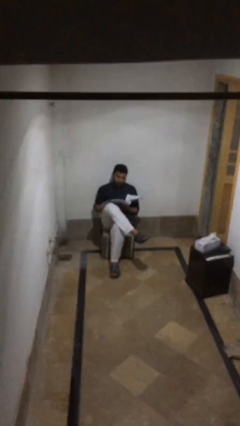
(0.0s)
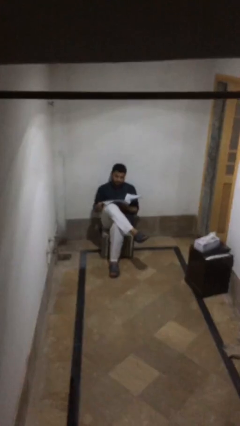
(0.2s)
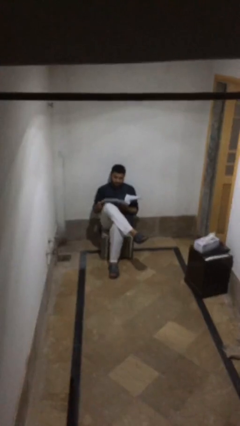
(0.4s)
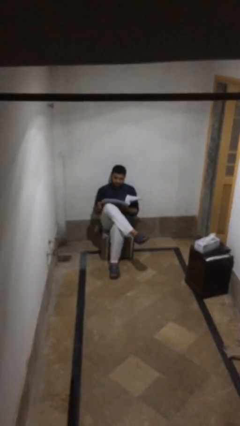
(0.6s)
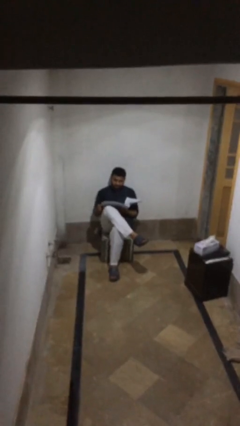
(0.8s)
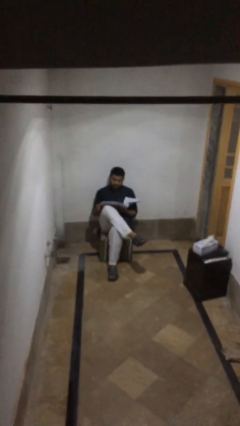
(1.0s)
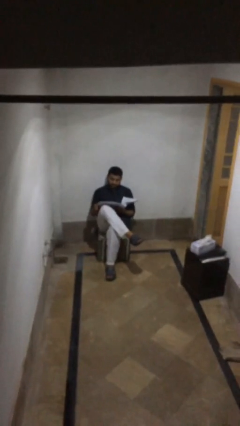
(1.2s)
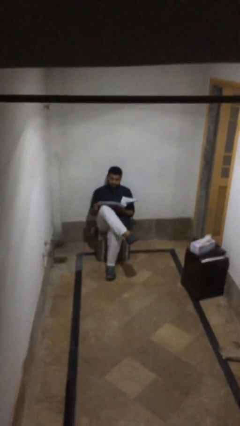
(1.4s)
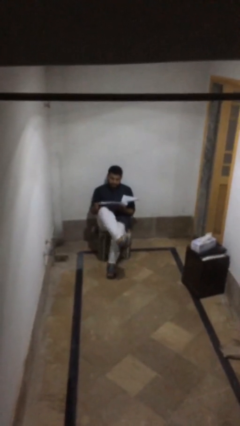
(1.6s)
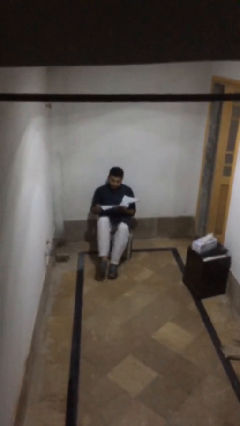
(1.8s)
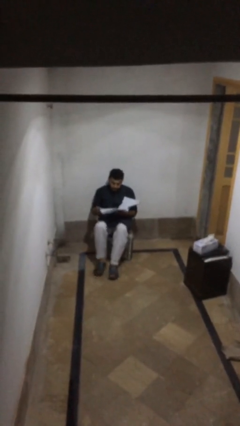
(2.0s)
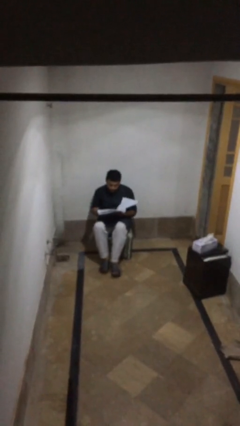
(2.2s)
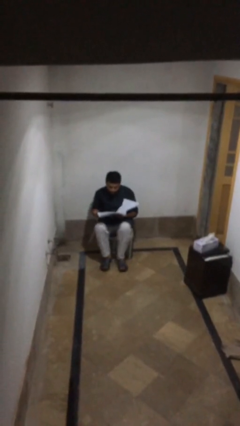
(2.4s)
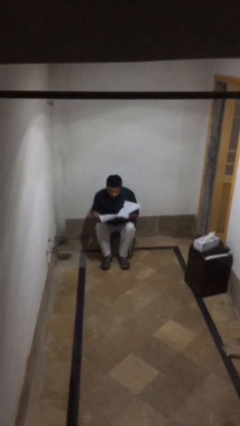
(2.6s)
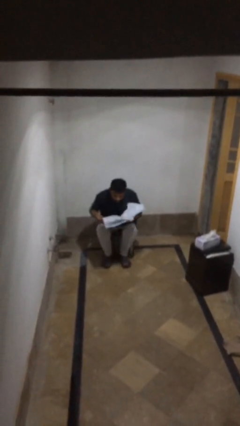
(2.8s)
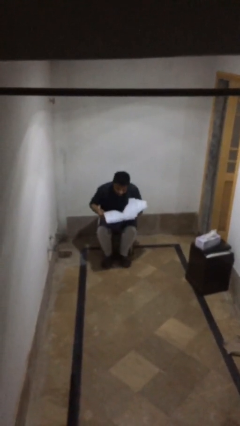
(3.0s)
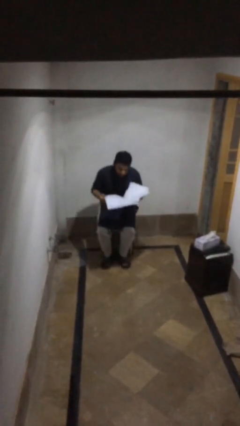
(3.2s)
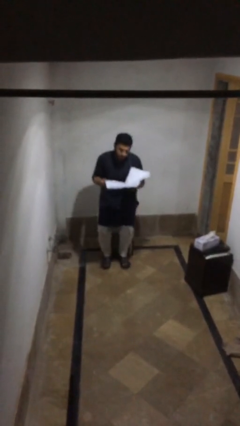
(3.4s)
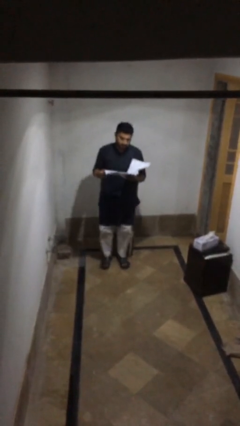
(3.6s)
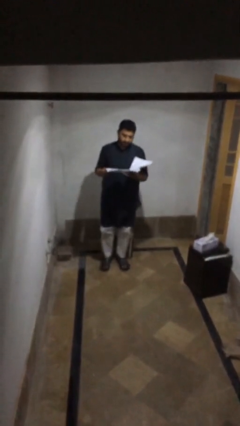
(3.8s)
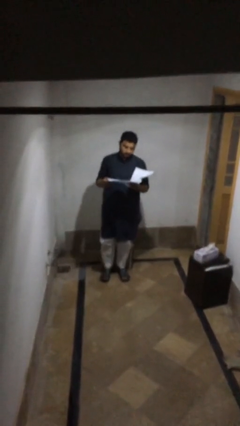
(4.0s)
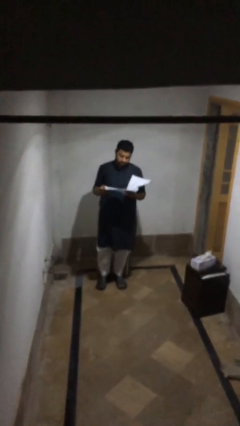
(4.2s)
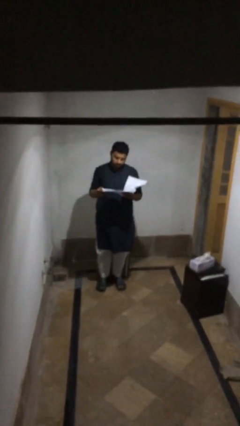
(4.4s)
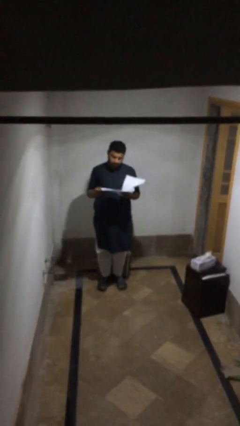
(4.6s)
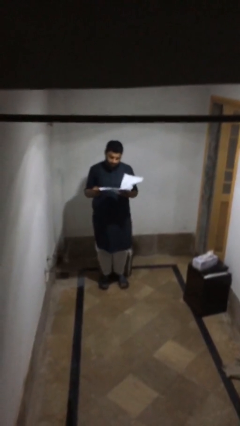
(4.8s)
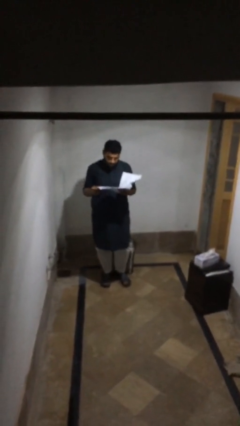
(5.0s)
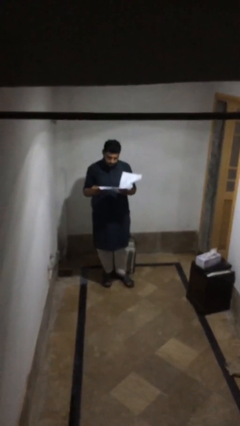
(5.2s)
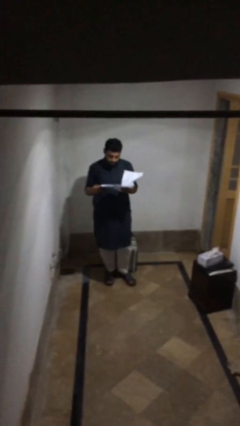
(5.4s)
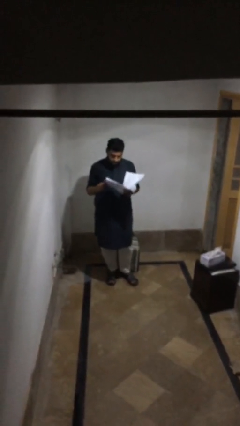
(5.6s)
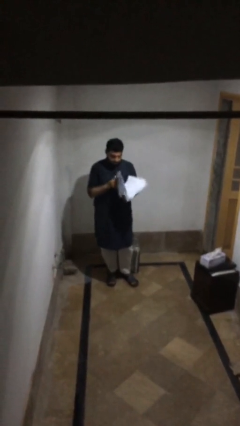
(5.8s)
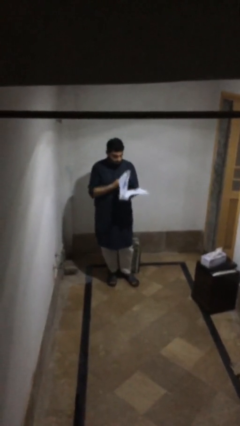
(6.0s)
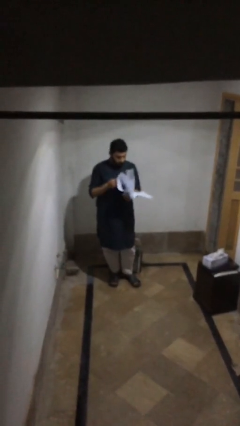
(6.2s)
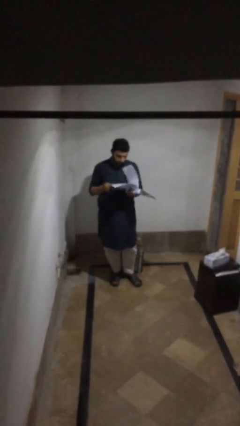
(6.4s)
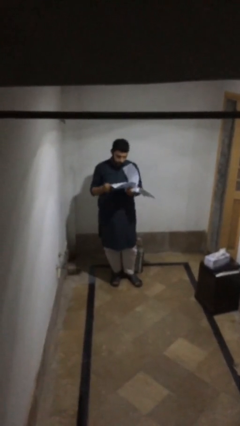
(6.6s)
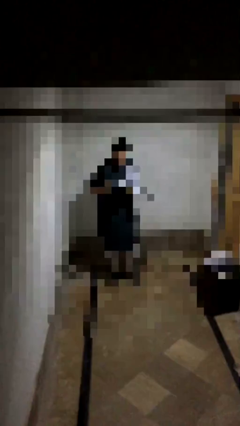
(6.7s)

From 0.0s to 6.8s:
person stands up

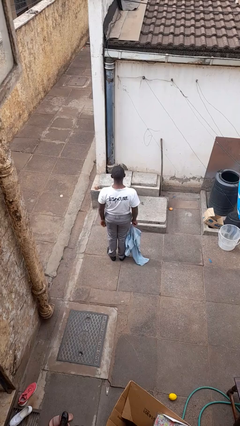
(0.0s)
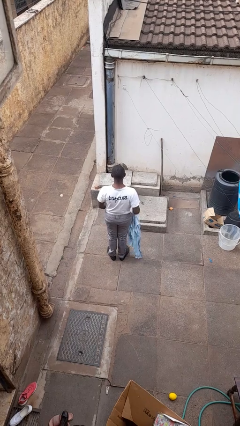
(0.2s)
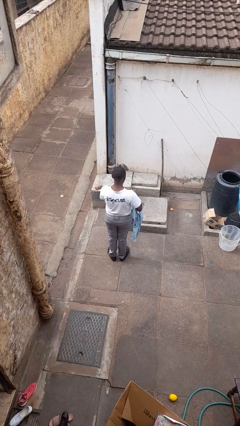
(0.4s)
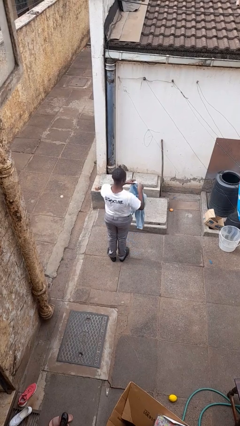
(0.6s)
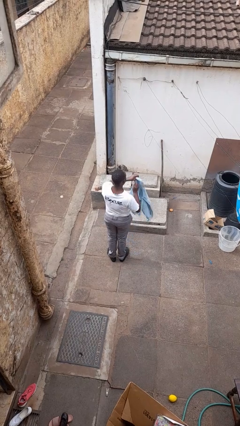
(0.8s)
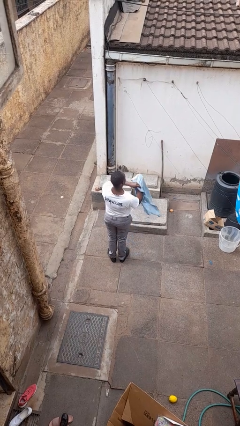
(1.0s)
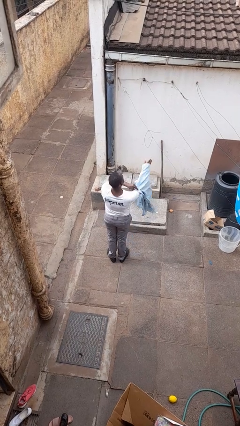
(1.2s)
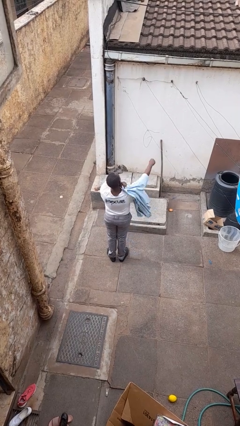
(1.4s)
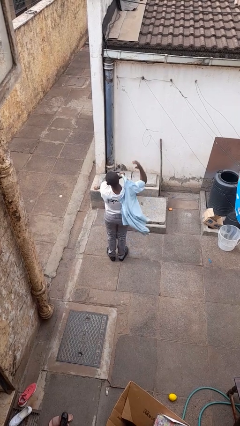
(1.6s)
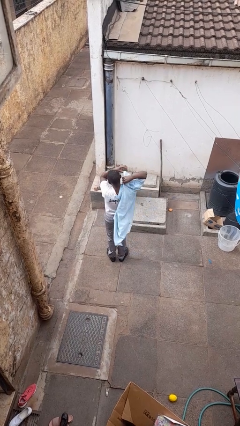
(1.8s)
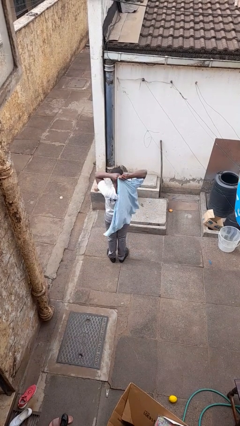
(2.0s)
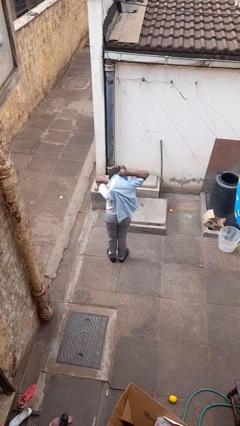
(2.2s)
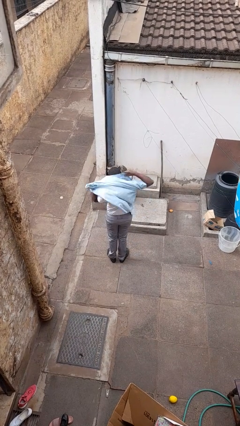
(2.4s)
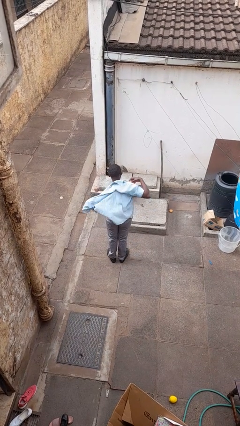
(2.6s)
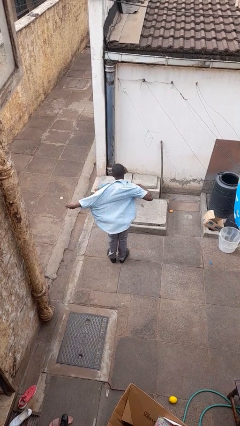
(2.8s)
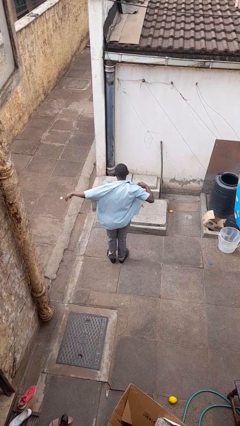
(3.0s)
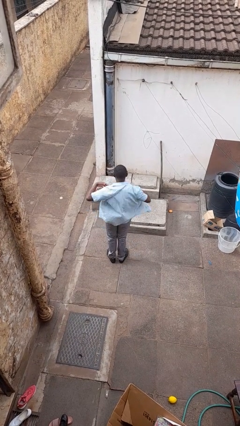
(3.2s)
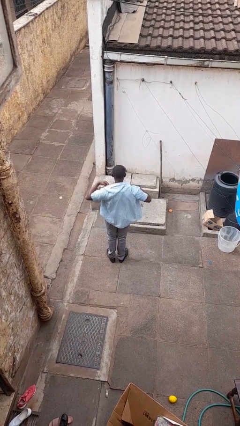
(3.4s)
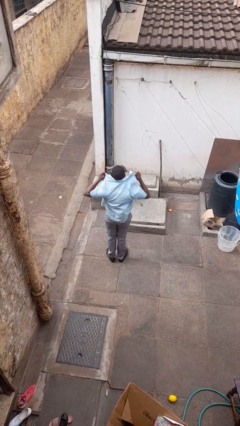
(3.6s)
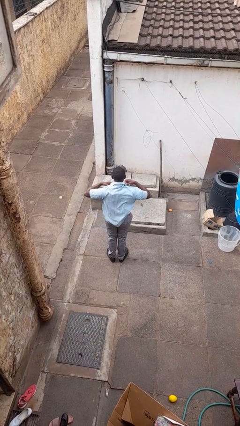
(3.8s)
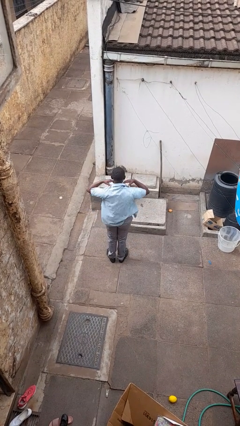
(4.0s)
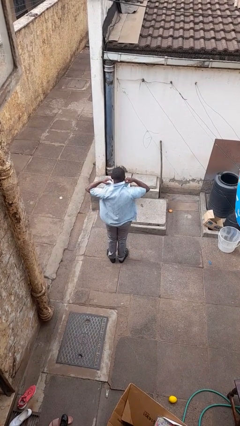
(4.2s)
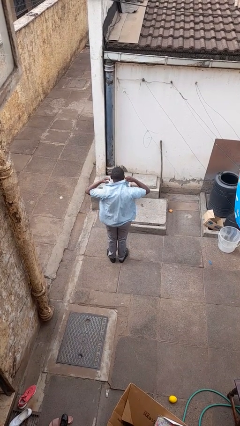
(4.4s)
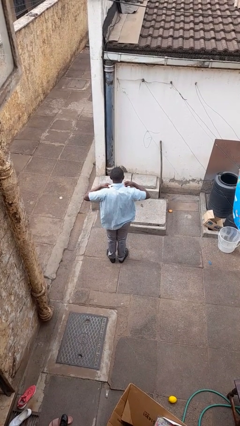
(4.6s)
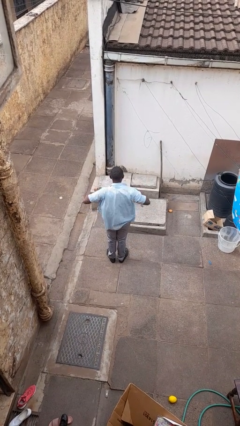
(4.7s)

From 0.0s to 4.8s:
person puts on shirt

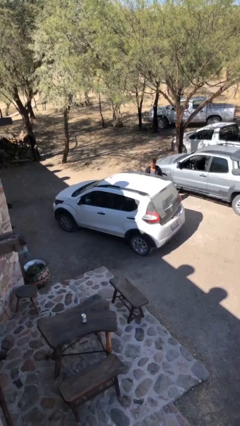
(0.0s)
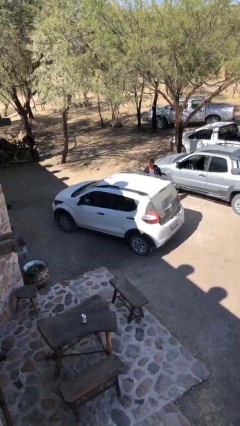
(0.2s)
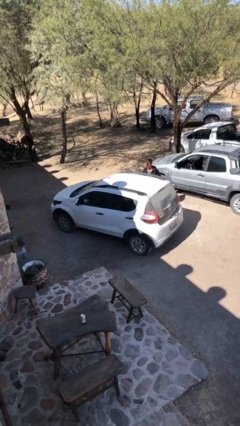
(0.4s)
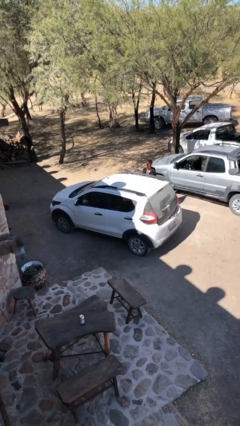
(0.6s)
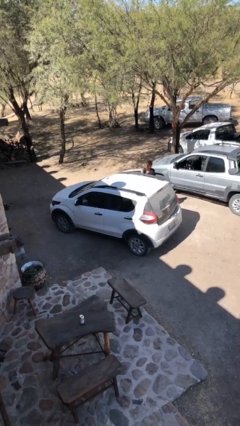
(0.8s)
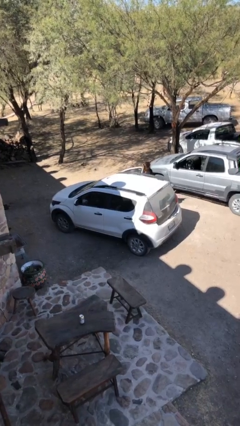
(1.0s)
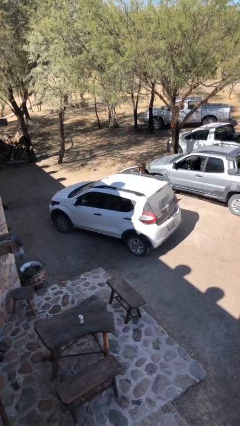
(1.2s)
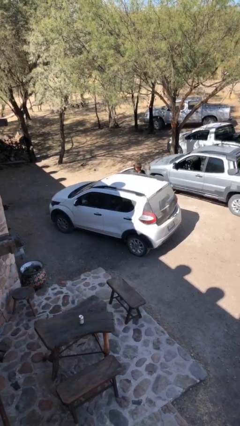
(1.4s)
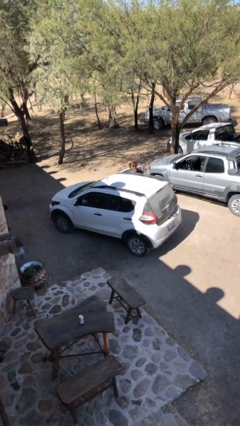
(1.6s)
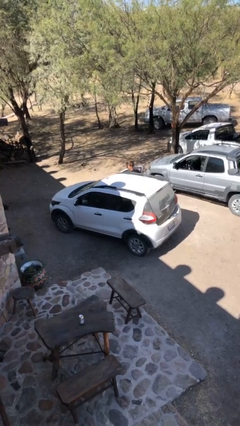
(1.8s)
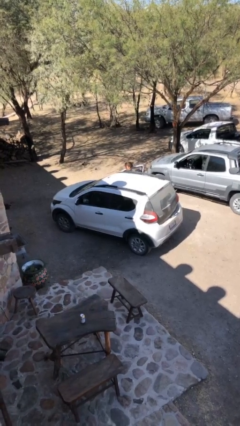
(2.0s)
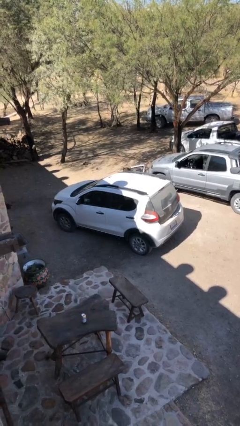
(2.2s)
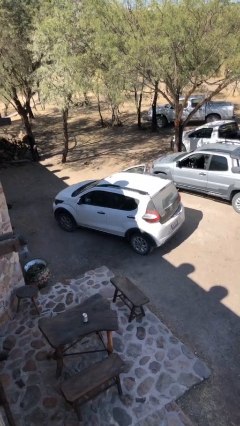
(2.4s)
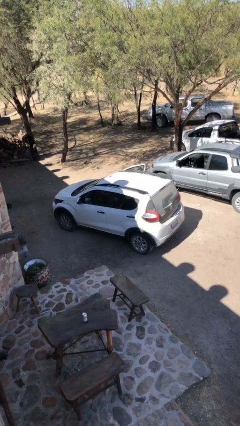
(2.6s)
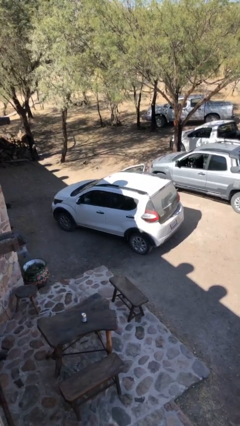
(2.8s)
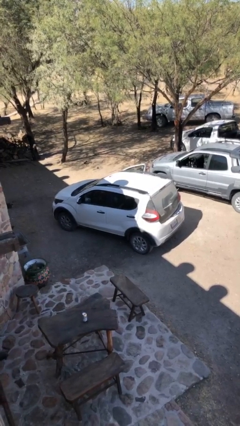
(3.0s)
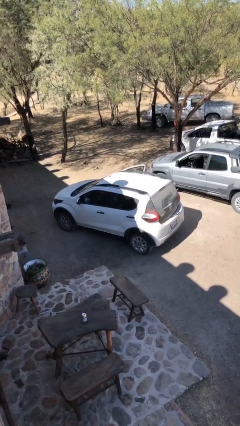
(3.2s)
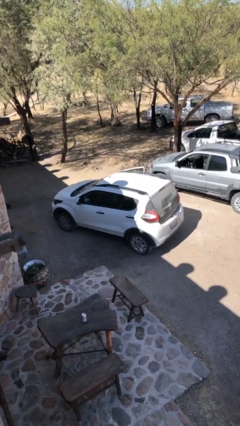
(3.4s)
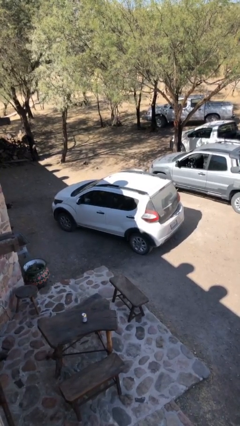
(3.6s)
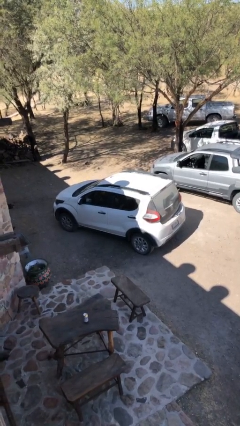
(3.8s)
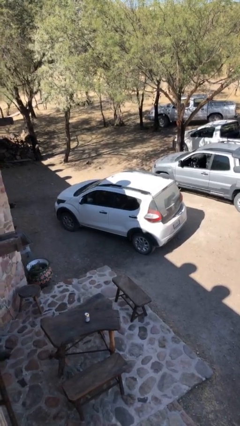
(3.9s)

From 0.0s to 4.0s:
car picks up person

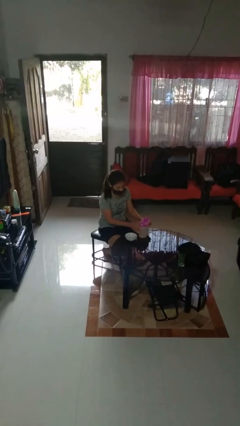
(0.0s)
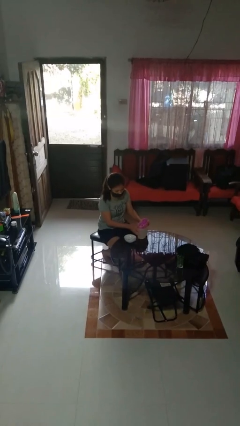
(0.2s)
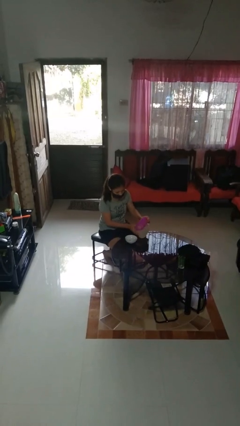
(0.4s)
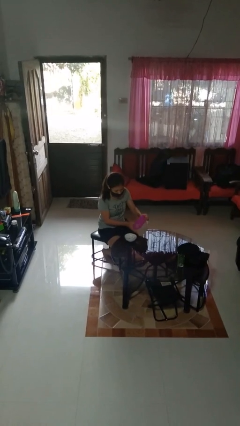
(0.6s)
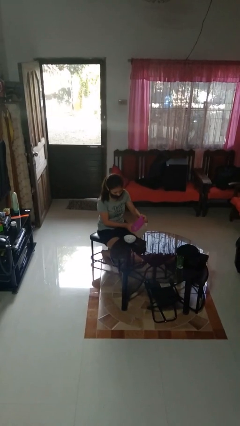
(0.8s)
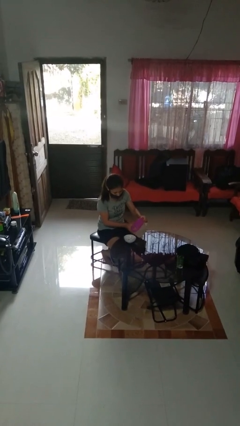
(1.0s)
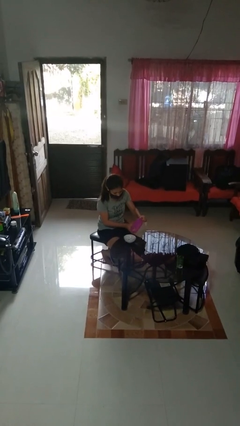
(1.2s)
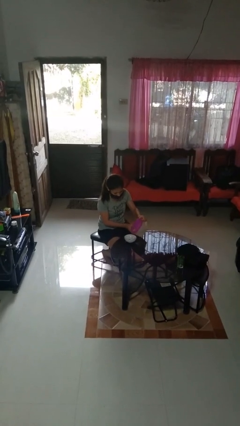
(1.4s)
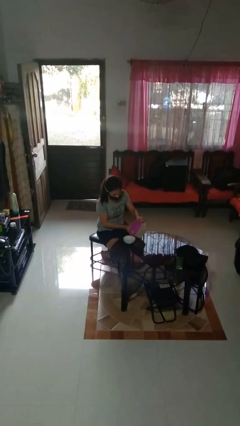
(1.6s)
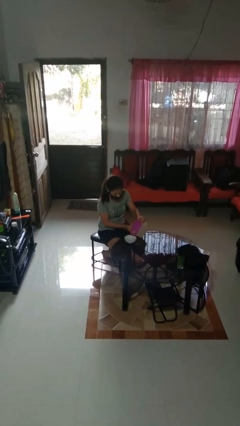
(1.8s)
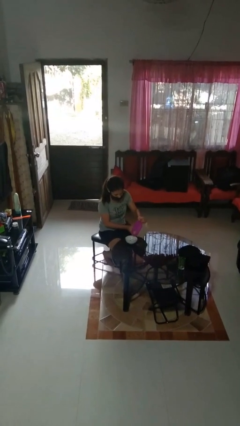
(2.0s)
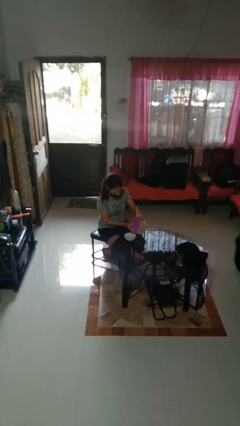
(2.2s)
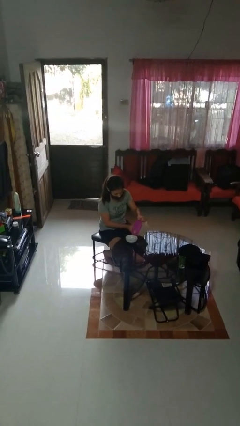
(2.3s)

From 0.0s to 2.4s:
person pours into bowl
